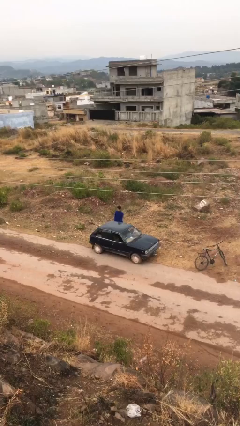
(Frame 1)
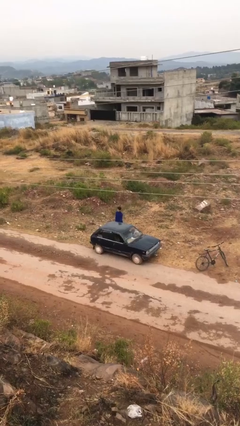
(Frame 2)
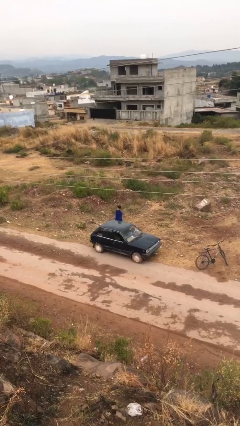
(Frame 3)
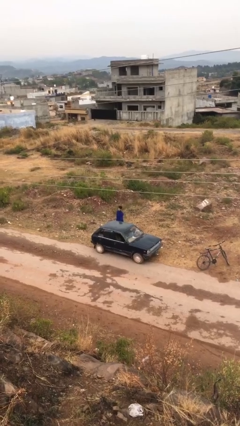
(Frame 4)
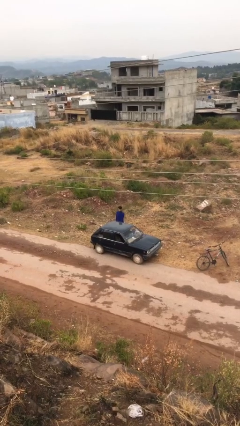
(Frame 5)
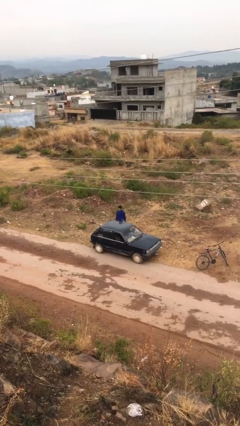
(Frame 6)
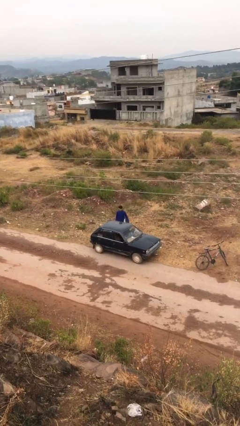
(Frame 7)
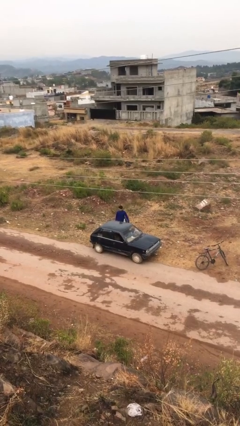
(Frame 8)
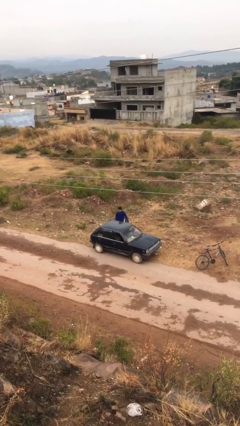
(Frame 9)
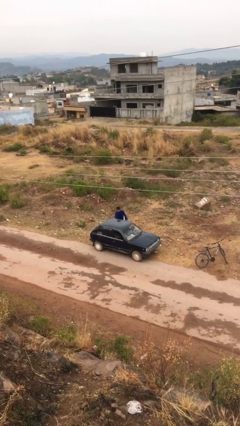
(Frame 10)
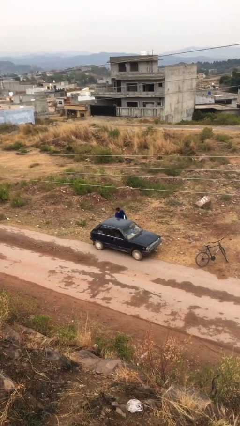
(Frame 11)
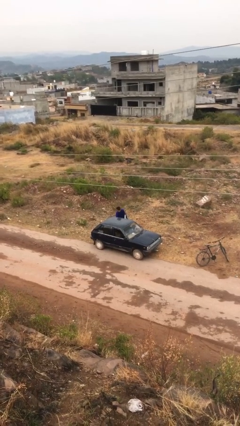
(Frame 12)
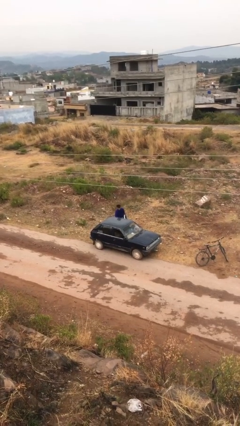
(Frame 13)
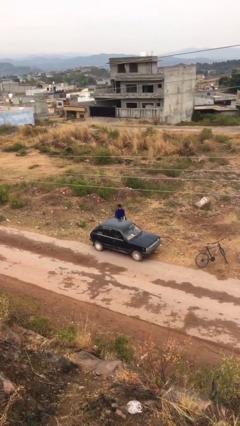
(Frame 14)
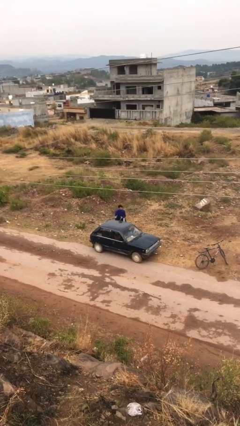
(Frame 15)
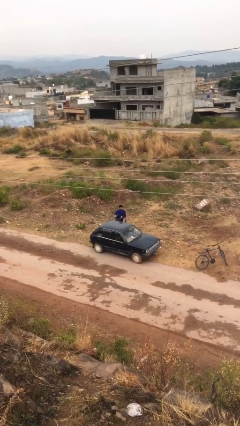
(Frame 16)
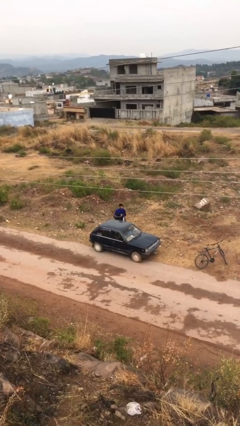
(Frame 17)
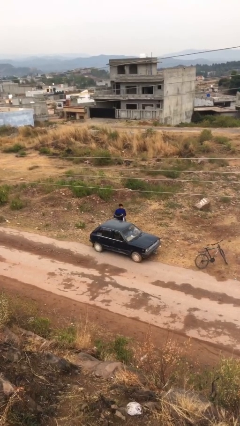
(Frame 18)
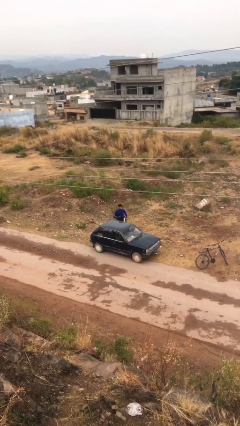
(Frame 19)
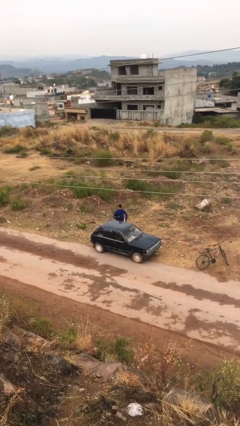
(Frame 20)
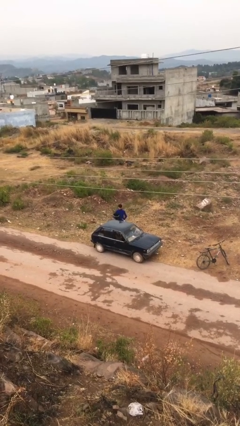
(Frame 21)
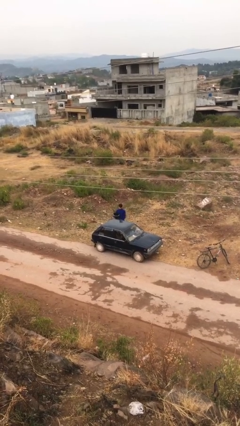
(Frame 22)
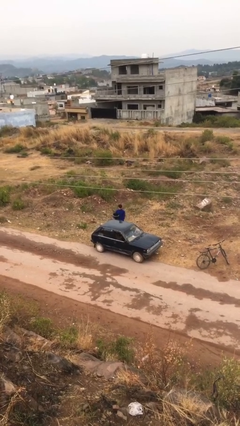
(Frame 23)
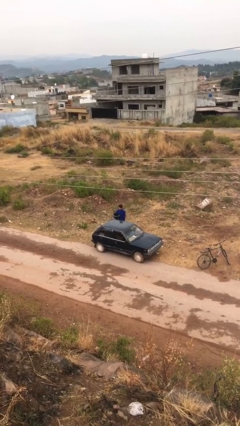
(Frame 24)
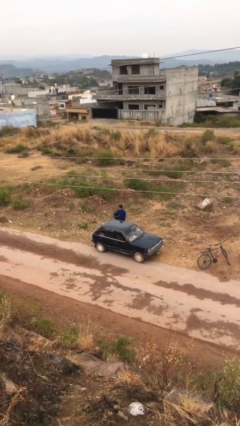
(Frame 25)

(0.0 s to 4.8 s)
person unloads car

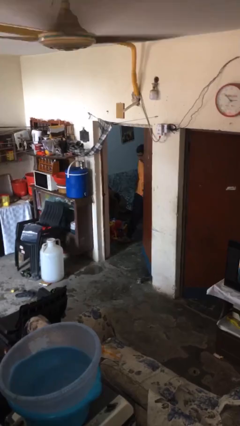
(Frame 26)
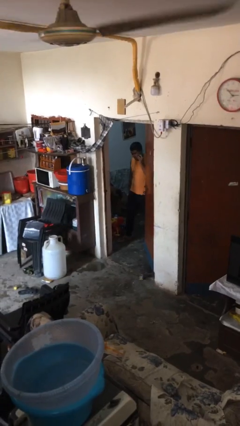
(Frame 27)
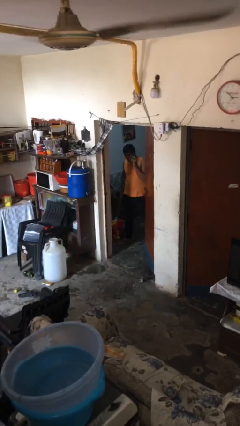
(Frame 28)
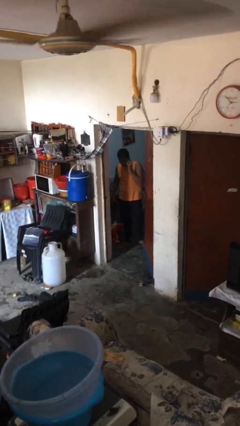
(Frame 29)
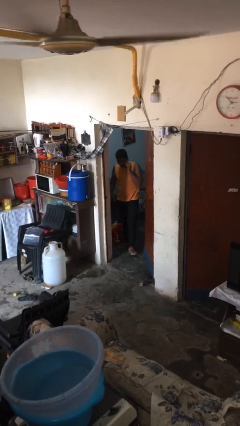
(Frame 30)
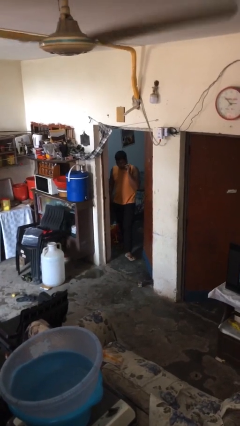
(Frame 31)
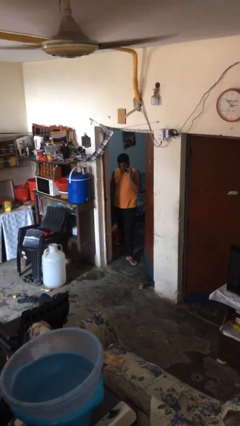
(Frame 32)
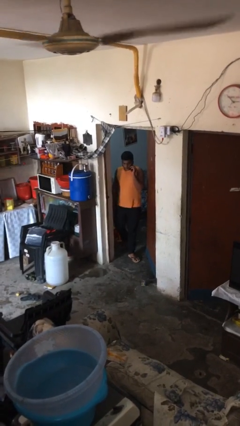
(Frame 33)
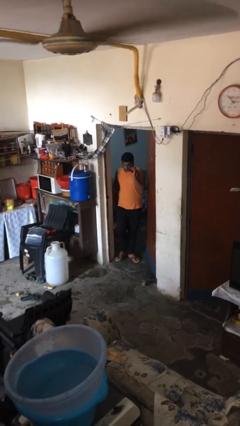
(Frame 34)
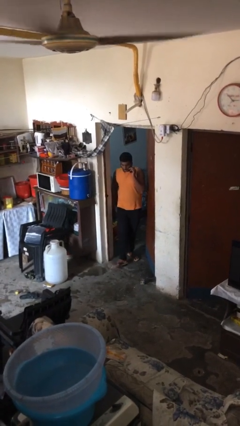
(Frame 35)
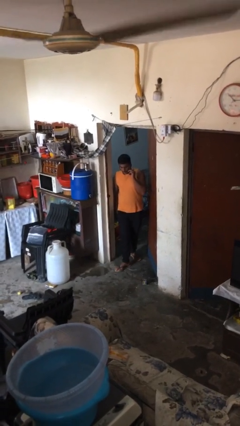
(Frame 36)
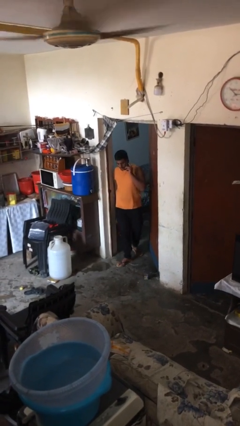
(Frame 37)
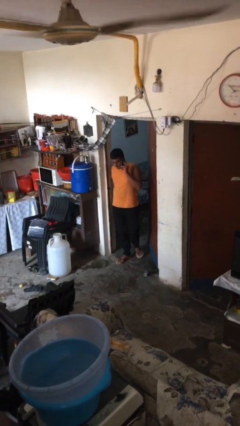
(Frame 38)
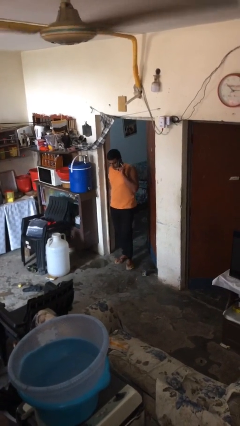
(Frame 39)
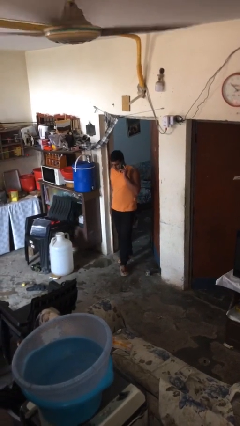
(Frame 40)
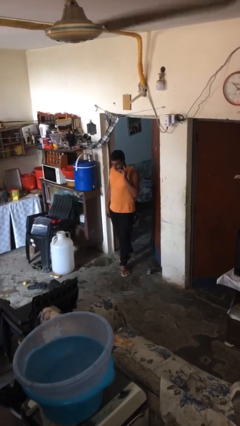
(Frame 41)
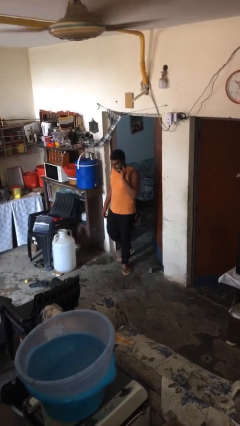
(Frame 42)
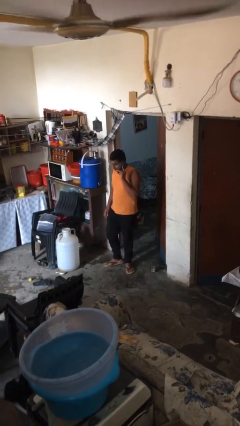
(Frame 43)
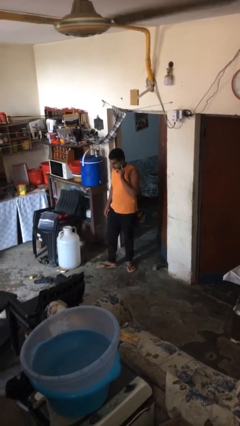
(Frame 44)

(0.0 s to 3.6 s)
person enters scene through structure

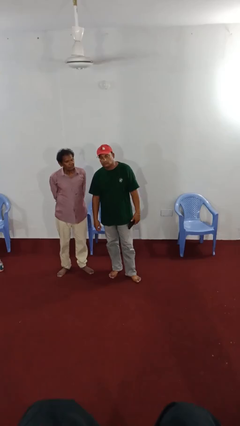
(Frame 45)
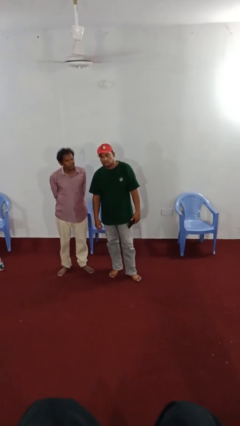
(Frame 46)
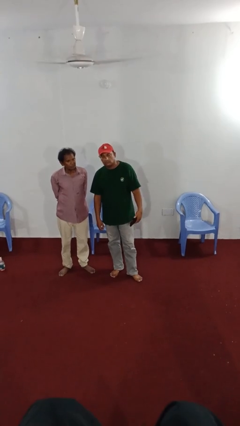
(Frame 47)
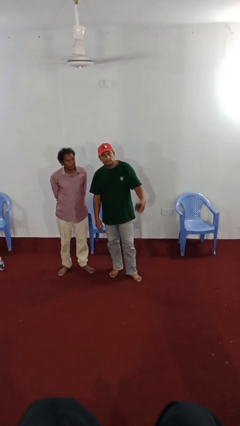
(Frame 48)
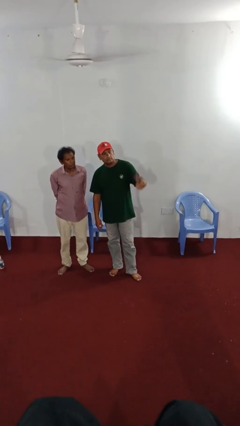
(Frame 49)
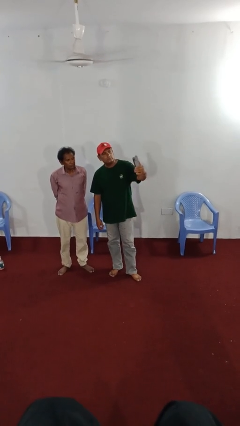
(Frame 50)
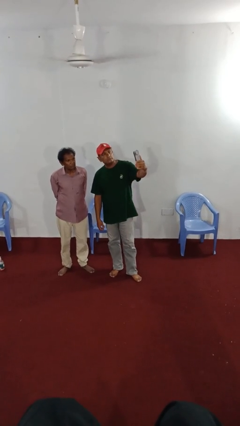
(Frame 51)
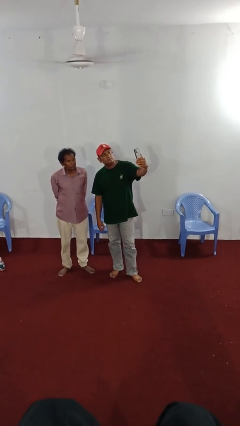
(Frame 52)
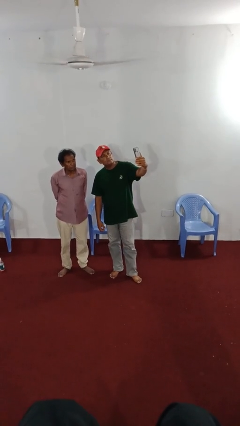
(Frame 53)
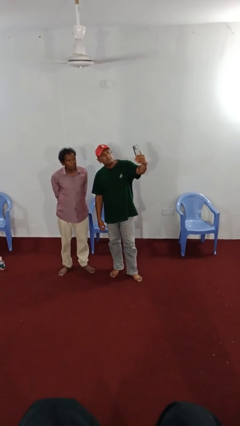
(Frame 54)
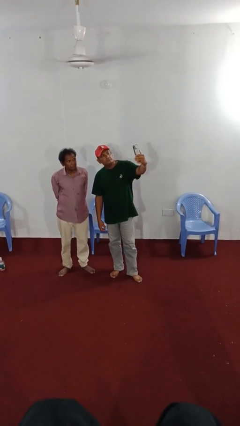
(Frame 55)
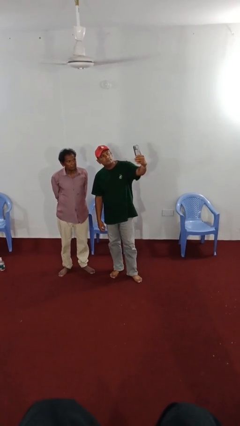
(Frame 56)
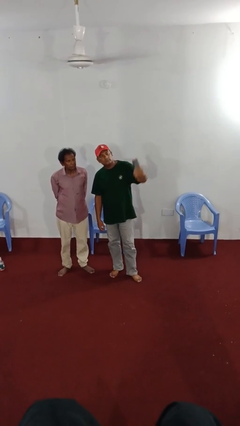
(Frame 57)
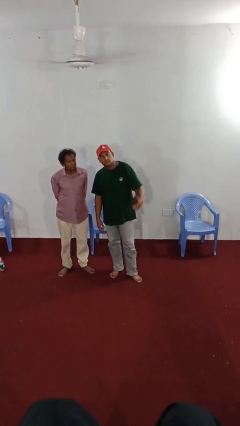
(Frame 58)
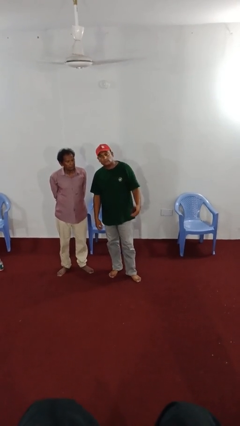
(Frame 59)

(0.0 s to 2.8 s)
person takes selfie with person

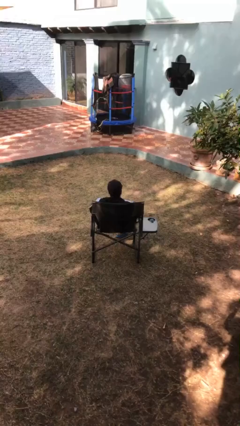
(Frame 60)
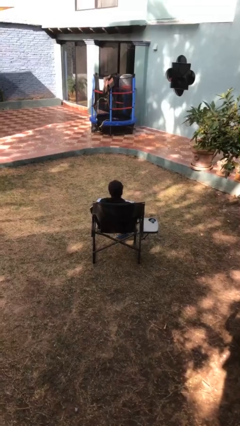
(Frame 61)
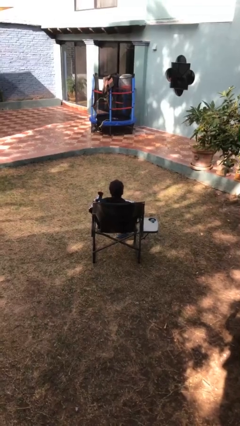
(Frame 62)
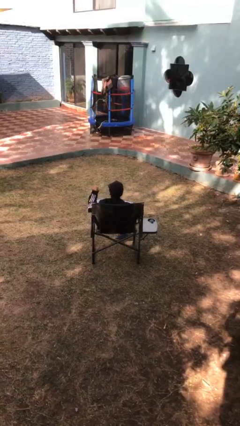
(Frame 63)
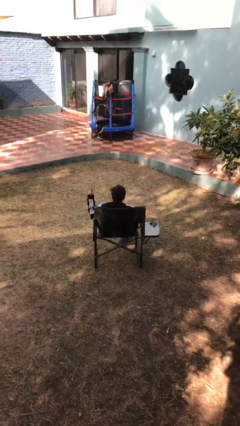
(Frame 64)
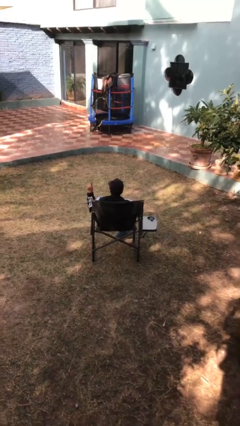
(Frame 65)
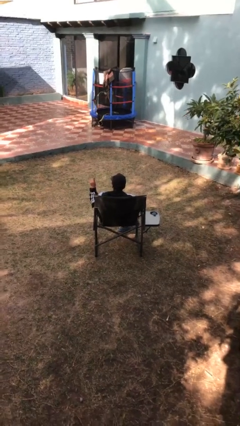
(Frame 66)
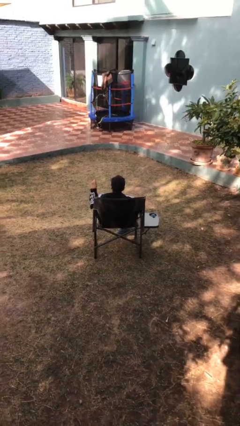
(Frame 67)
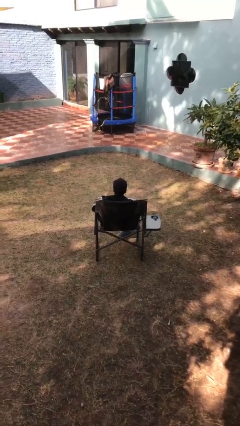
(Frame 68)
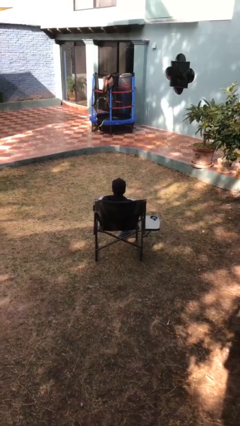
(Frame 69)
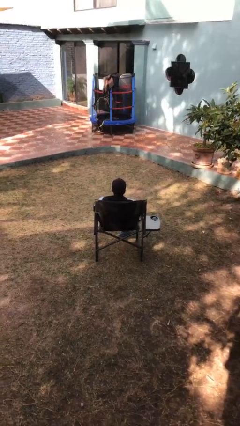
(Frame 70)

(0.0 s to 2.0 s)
person gestures number one

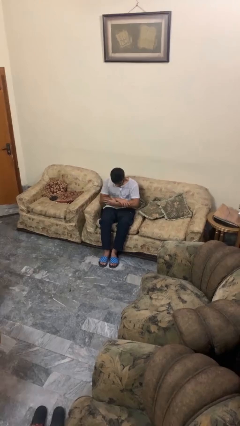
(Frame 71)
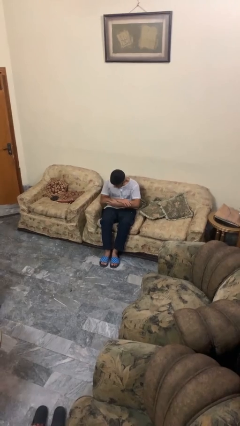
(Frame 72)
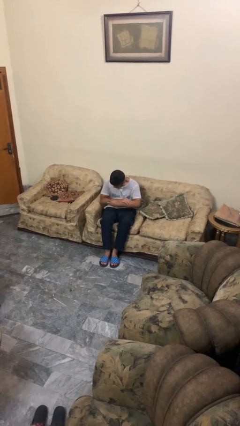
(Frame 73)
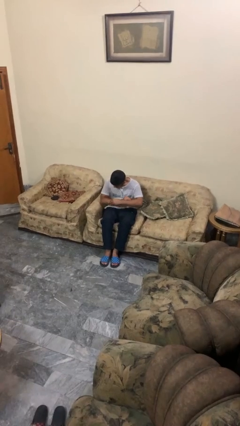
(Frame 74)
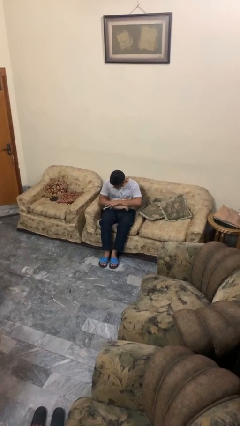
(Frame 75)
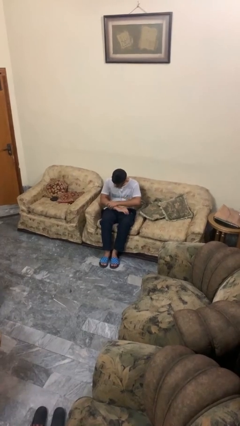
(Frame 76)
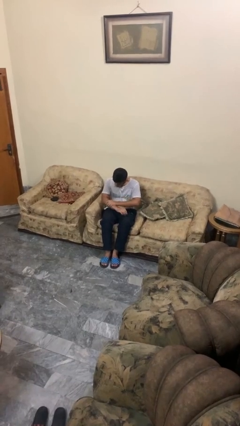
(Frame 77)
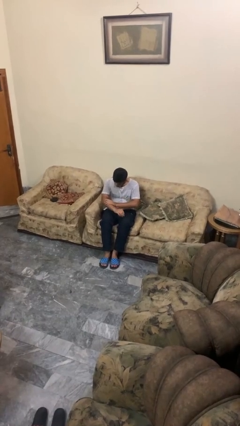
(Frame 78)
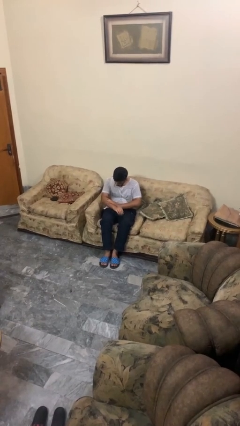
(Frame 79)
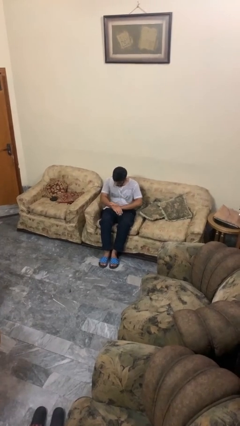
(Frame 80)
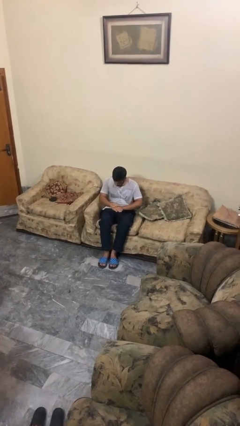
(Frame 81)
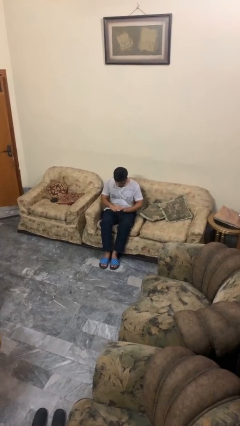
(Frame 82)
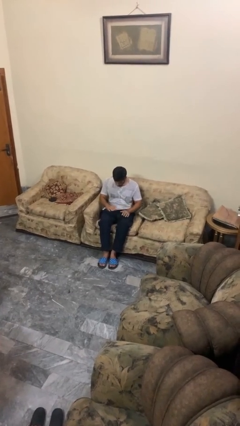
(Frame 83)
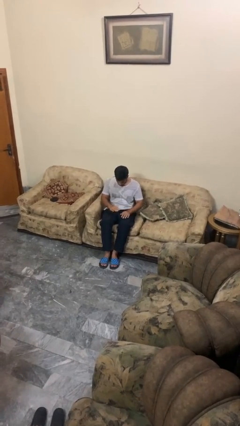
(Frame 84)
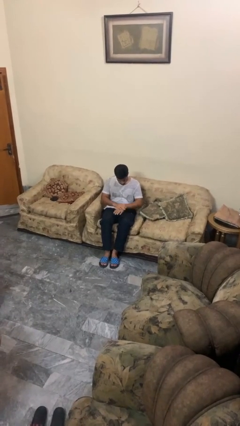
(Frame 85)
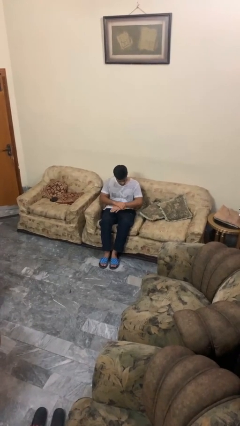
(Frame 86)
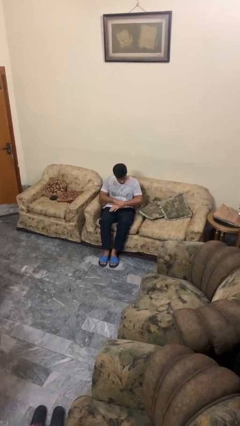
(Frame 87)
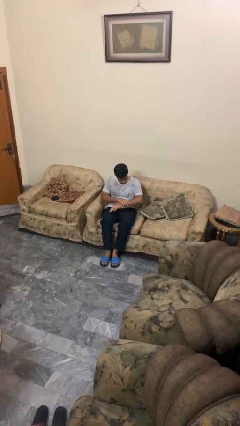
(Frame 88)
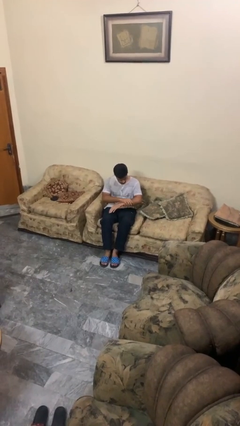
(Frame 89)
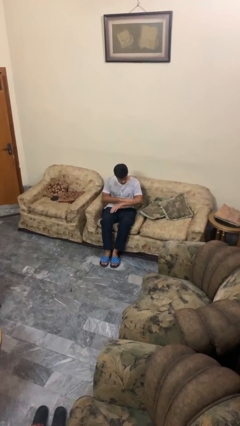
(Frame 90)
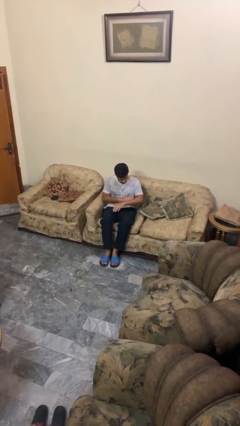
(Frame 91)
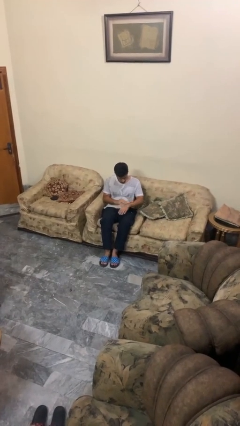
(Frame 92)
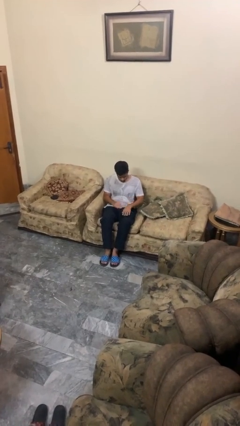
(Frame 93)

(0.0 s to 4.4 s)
person looks at hands in lap
